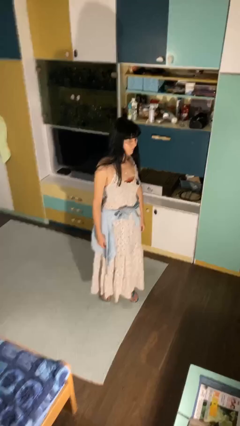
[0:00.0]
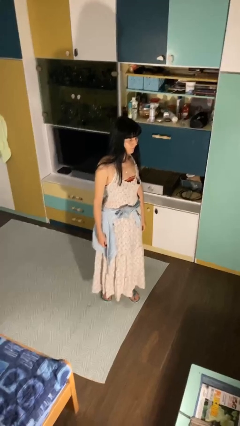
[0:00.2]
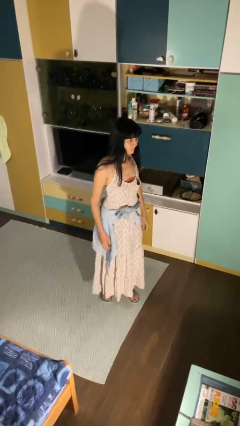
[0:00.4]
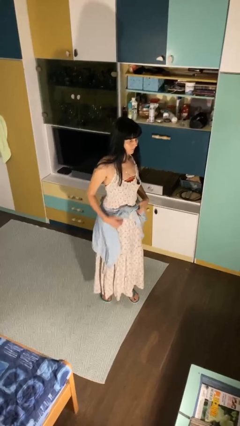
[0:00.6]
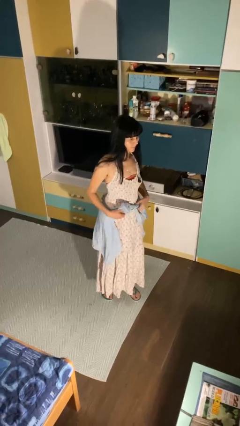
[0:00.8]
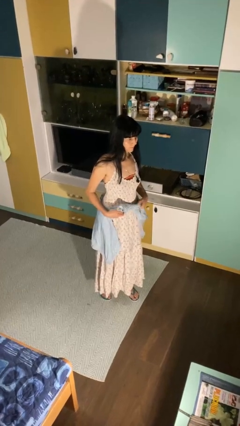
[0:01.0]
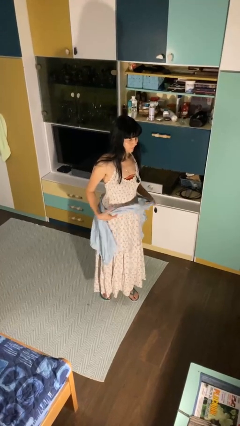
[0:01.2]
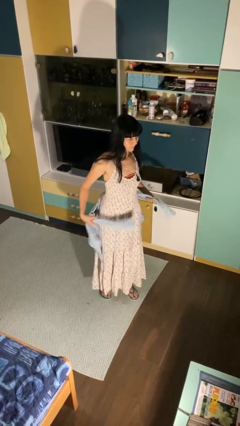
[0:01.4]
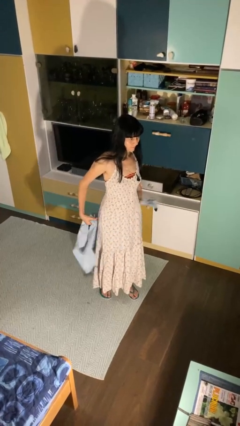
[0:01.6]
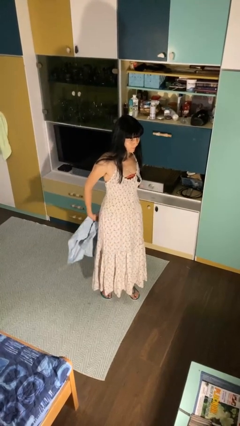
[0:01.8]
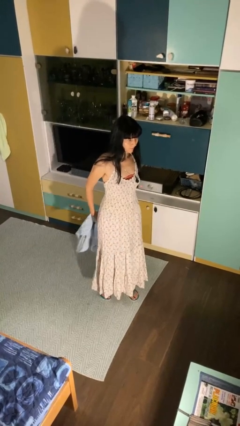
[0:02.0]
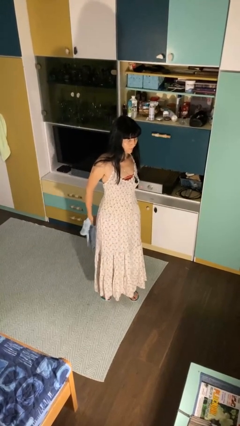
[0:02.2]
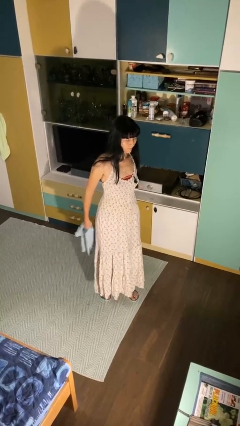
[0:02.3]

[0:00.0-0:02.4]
person unties jacket around waist

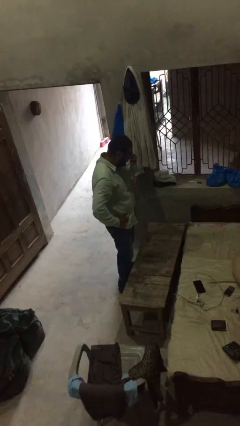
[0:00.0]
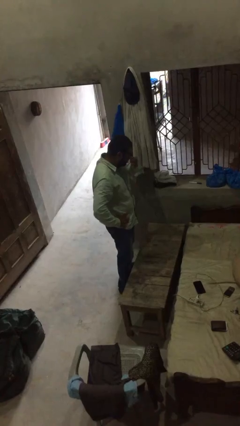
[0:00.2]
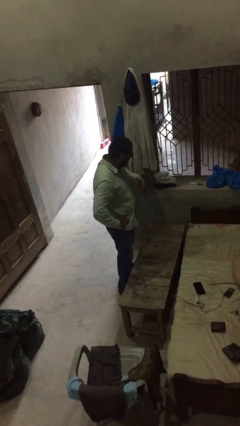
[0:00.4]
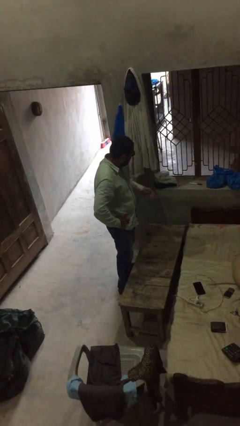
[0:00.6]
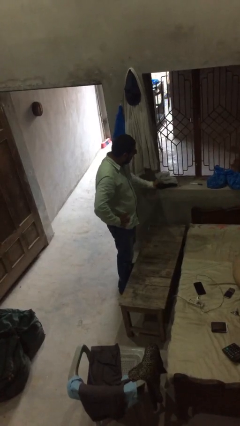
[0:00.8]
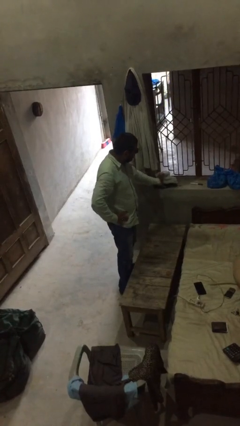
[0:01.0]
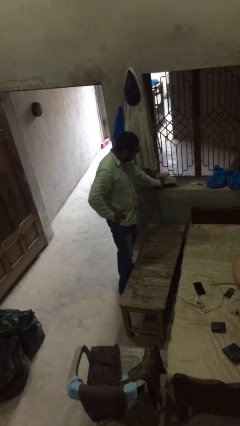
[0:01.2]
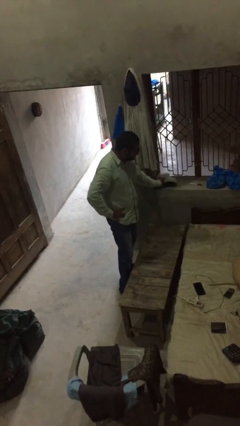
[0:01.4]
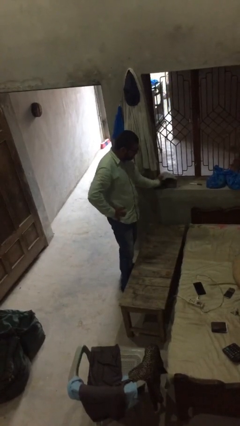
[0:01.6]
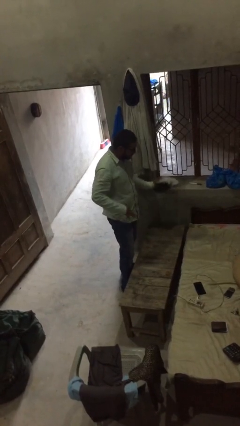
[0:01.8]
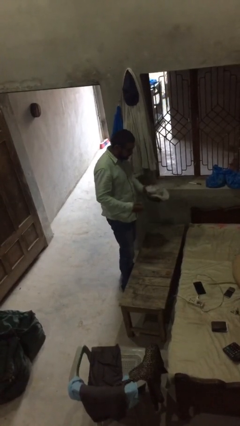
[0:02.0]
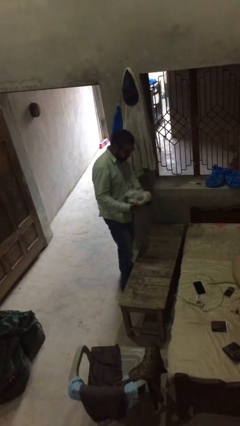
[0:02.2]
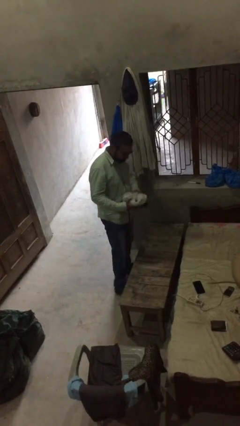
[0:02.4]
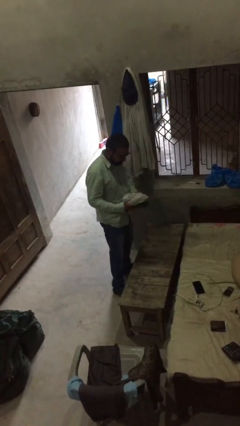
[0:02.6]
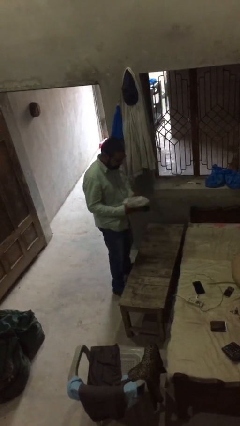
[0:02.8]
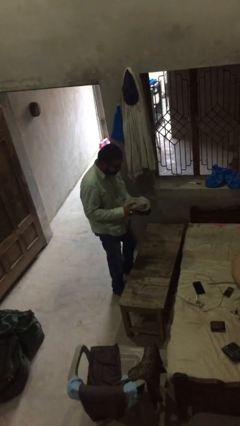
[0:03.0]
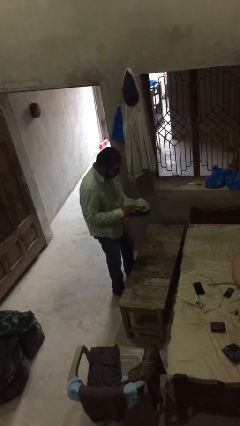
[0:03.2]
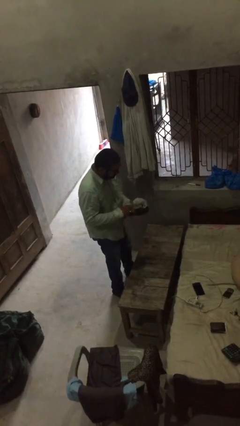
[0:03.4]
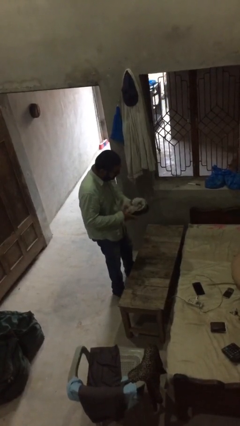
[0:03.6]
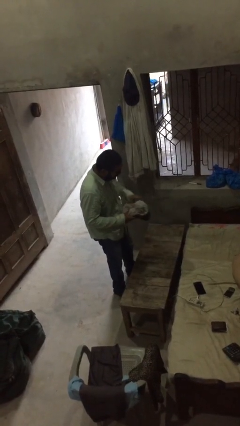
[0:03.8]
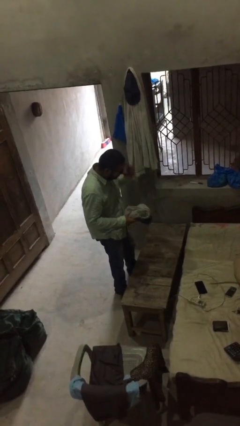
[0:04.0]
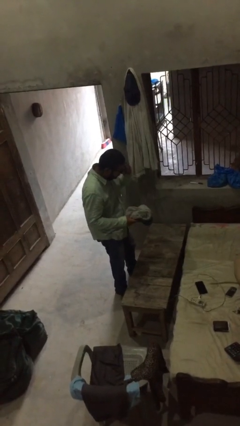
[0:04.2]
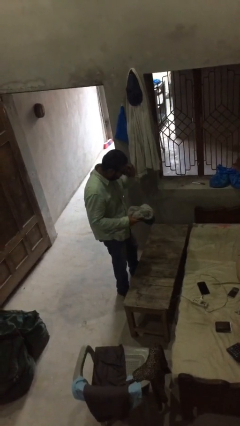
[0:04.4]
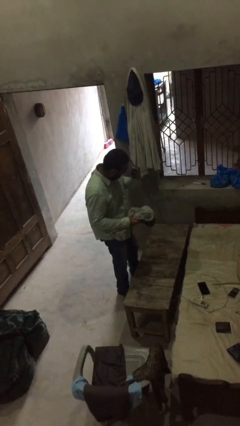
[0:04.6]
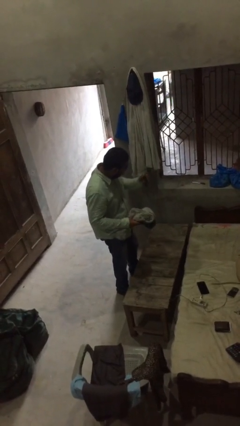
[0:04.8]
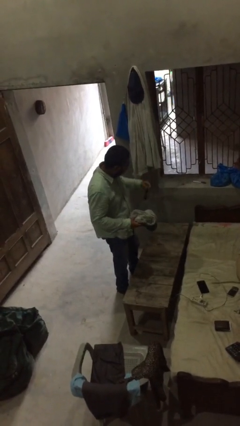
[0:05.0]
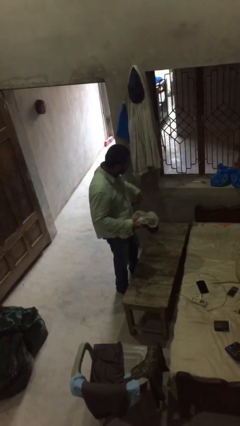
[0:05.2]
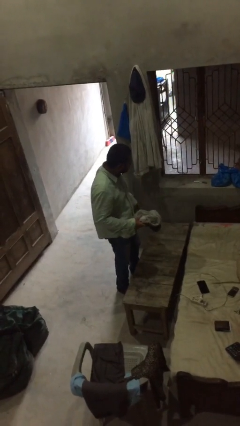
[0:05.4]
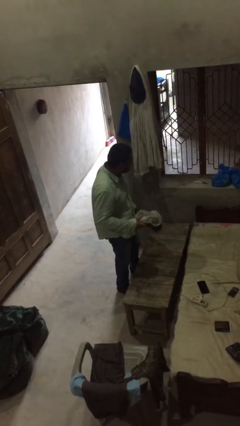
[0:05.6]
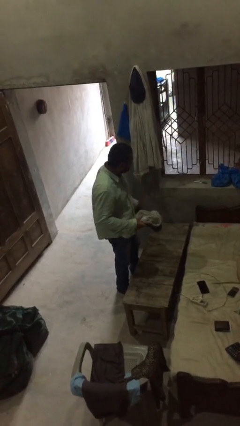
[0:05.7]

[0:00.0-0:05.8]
person picks up object from shelf

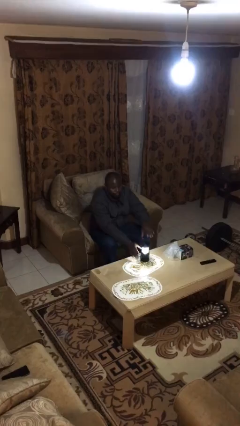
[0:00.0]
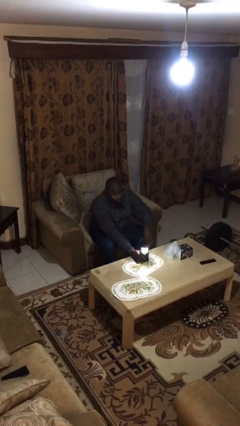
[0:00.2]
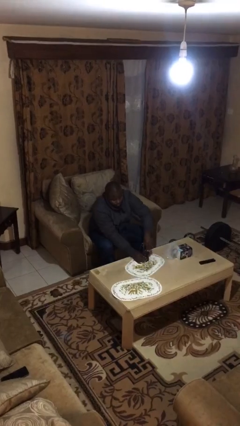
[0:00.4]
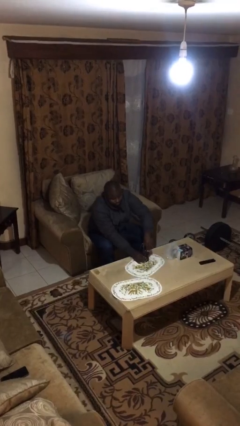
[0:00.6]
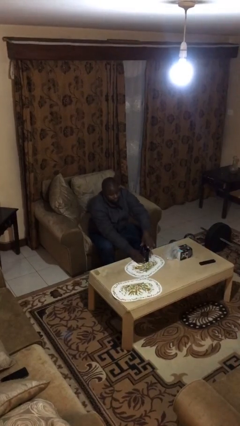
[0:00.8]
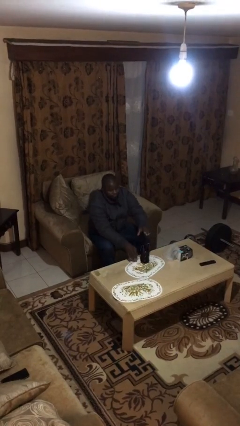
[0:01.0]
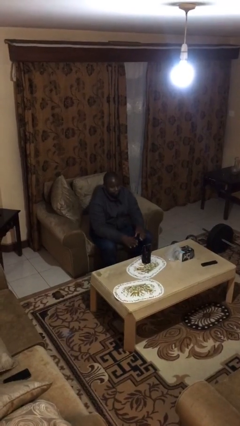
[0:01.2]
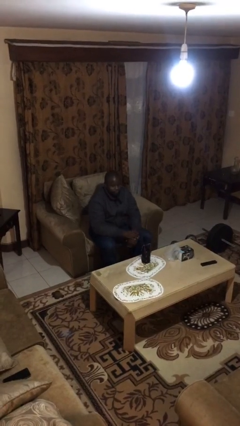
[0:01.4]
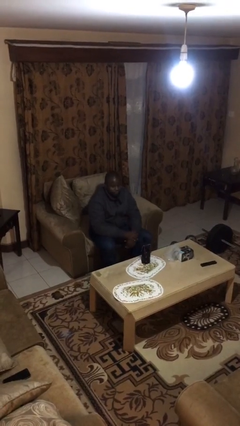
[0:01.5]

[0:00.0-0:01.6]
person turns off lamp

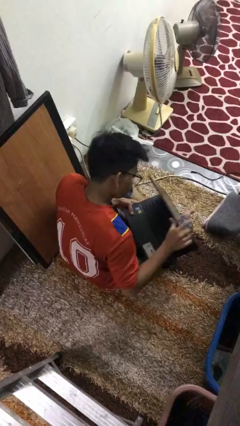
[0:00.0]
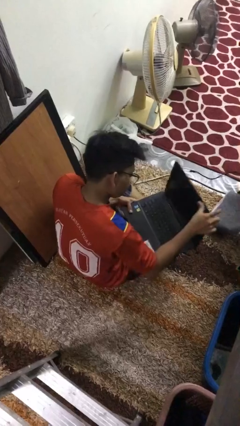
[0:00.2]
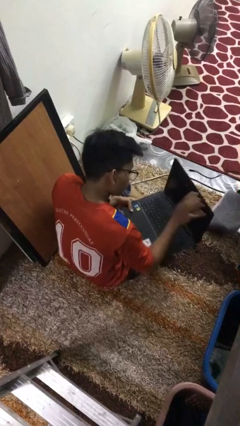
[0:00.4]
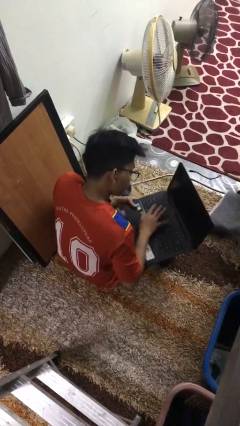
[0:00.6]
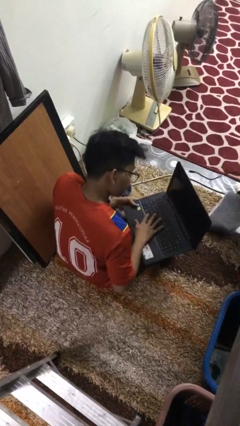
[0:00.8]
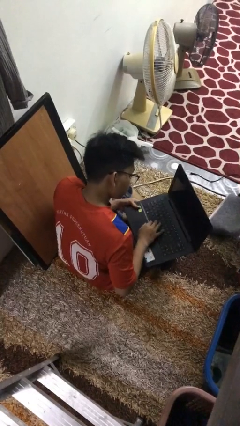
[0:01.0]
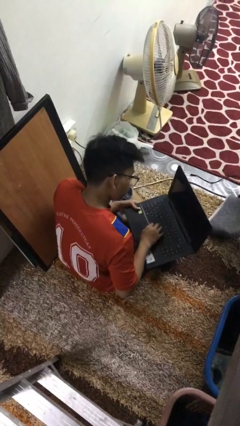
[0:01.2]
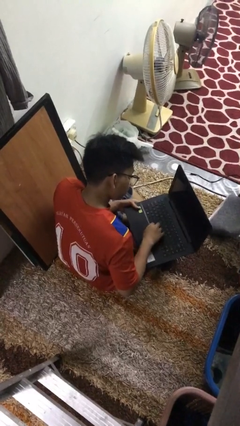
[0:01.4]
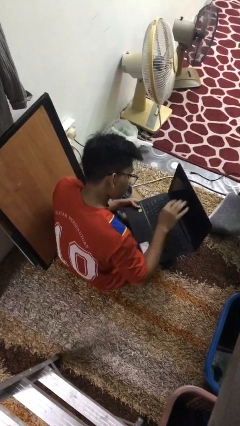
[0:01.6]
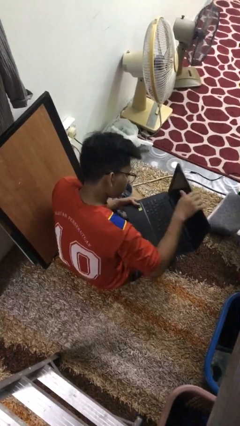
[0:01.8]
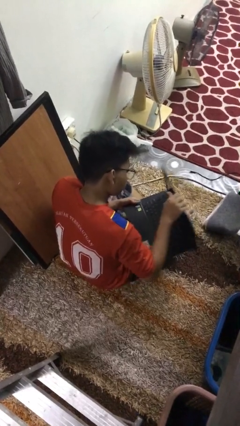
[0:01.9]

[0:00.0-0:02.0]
person opens laptop

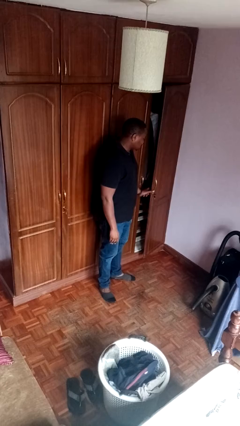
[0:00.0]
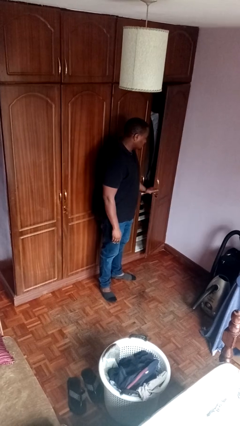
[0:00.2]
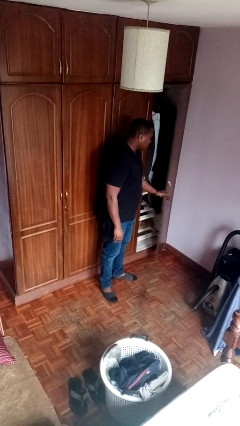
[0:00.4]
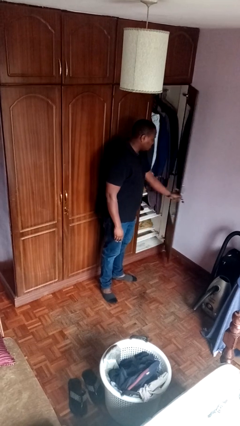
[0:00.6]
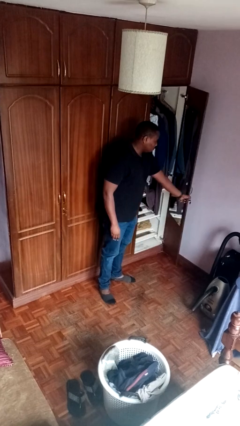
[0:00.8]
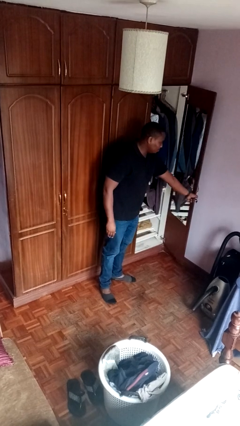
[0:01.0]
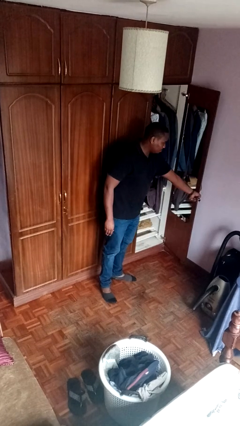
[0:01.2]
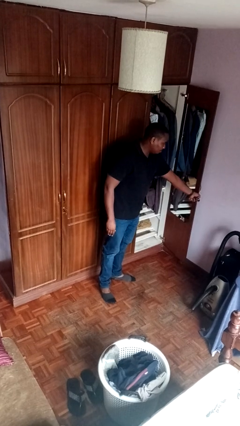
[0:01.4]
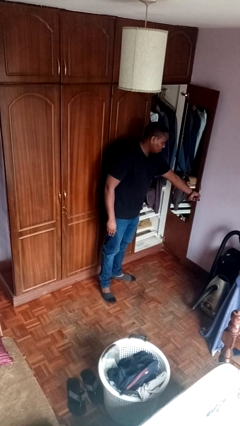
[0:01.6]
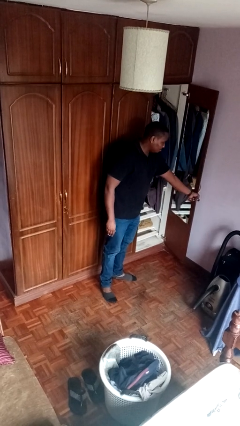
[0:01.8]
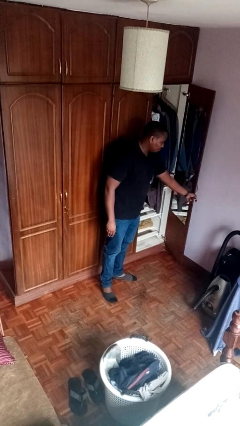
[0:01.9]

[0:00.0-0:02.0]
person opens closet door

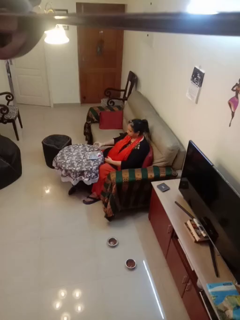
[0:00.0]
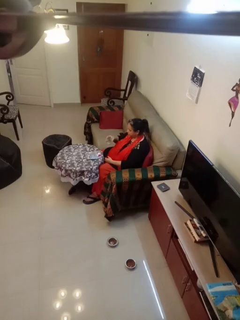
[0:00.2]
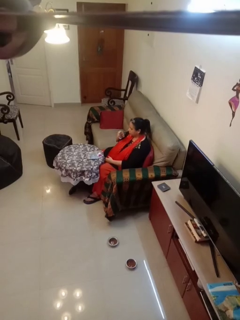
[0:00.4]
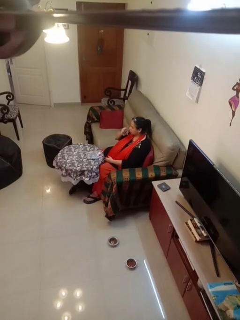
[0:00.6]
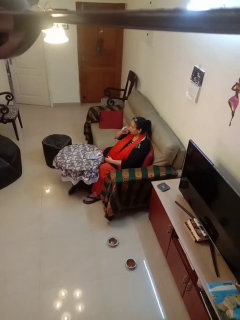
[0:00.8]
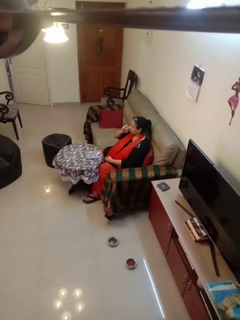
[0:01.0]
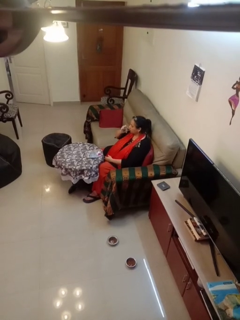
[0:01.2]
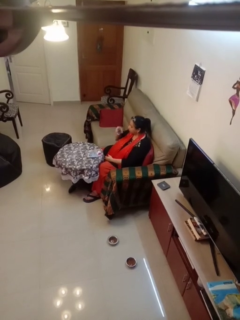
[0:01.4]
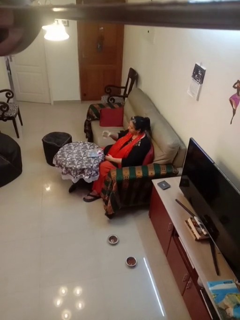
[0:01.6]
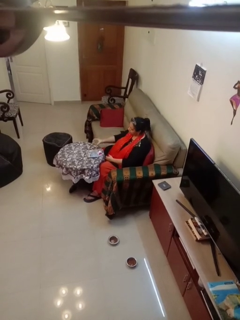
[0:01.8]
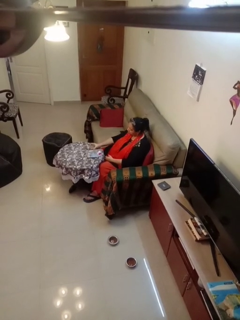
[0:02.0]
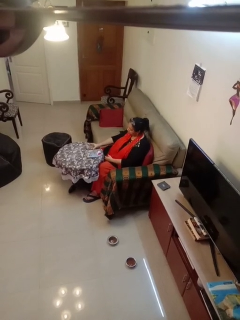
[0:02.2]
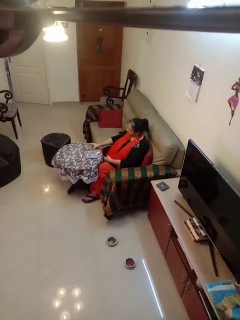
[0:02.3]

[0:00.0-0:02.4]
person drinks from cup

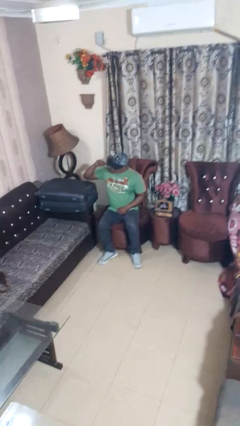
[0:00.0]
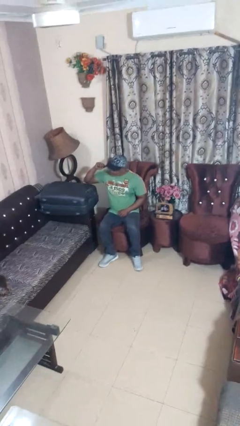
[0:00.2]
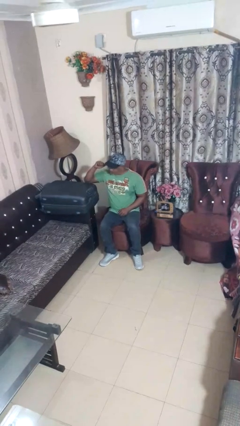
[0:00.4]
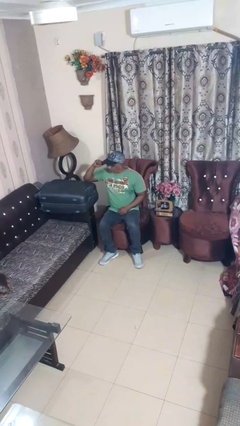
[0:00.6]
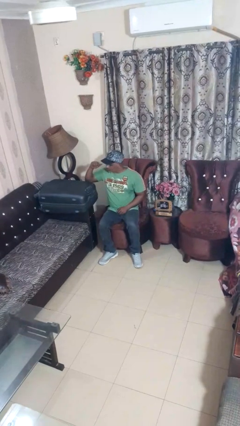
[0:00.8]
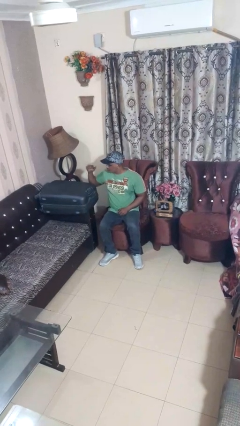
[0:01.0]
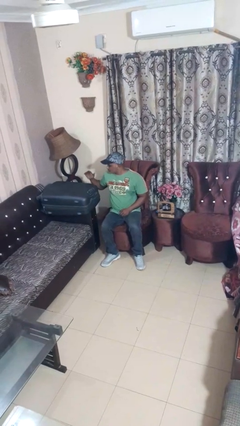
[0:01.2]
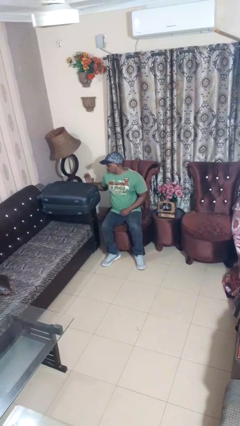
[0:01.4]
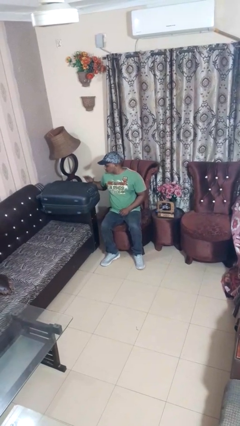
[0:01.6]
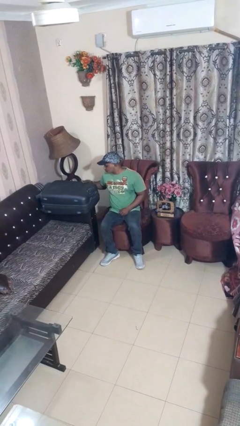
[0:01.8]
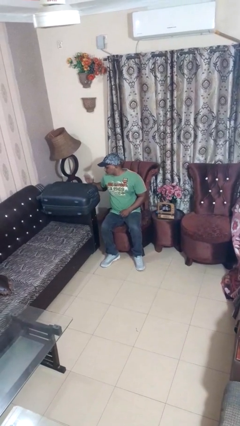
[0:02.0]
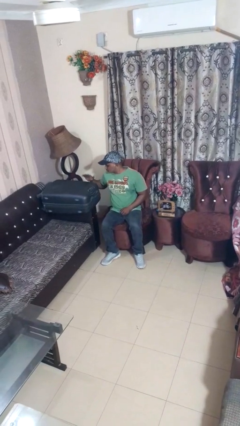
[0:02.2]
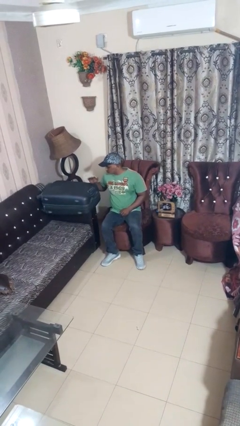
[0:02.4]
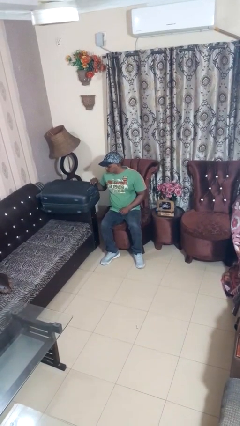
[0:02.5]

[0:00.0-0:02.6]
person taps object with finger
